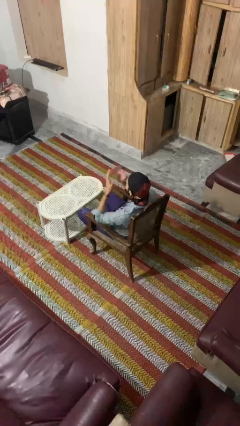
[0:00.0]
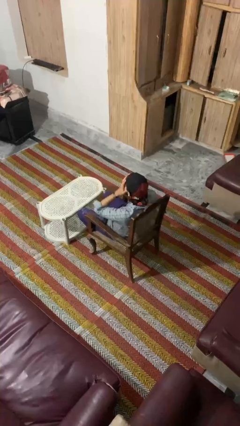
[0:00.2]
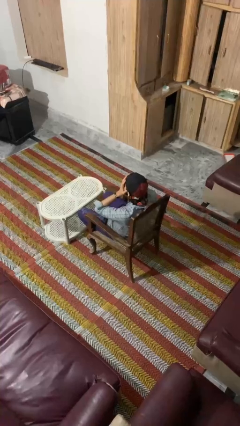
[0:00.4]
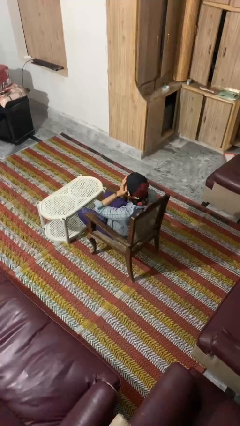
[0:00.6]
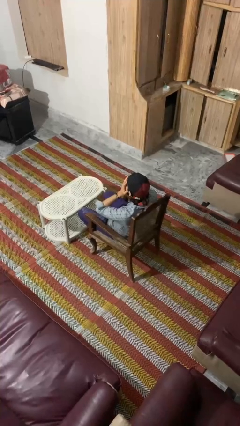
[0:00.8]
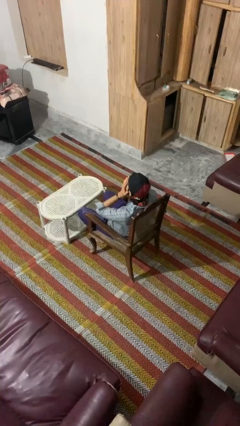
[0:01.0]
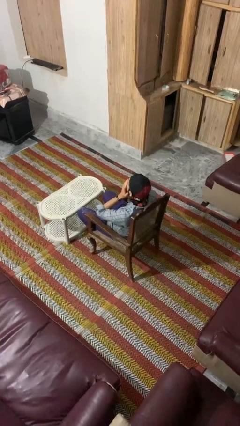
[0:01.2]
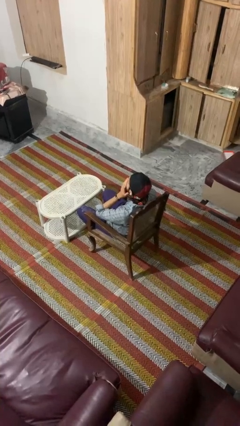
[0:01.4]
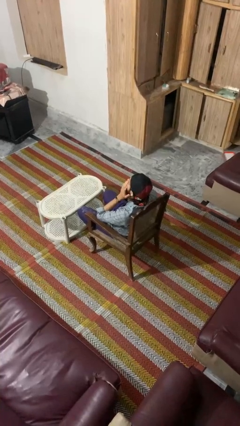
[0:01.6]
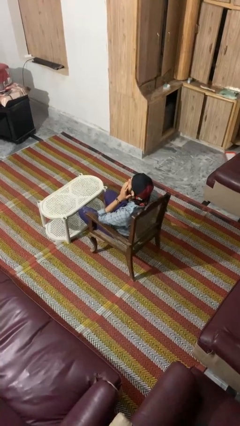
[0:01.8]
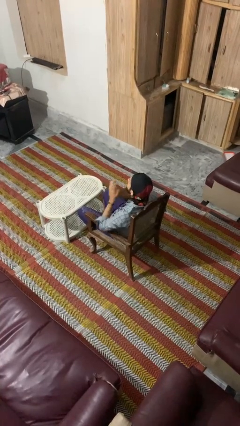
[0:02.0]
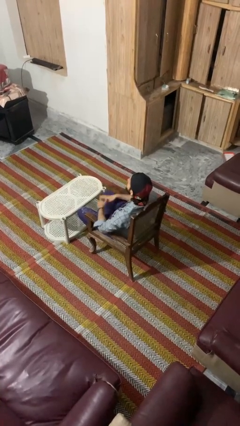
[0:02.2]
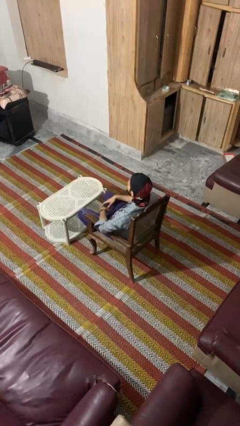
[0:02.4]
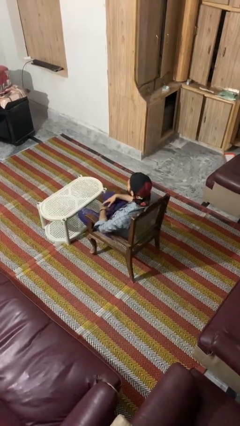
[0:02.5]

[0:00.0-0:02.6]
person covers face with hands

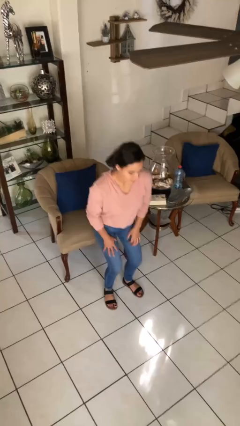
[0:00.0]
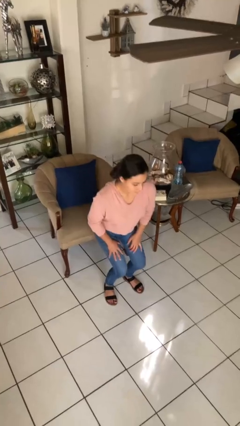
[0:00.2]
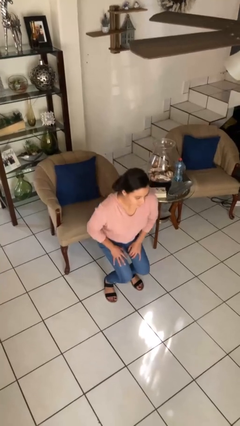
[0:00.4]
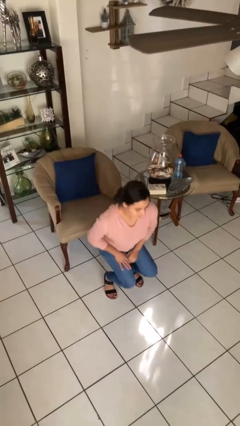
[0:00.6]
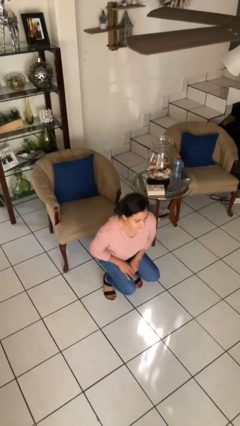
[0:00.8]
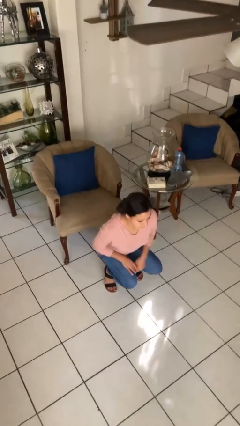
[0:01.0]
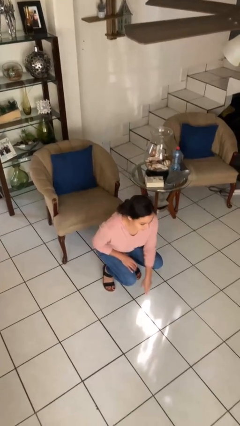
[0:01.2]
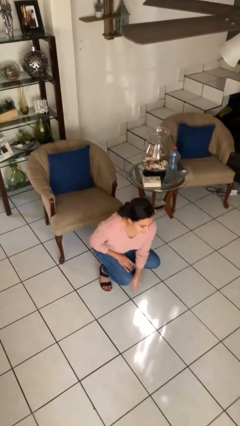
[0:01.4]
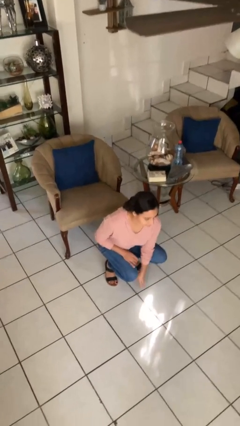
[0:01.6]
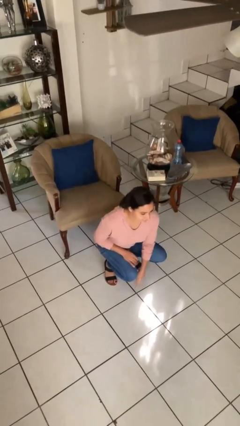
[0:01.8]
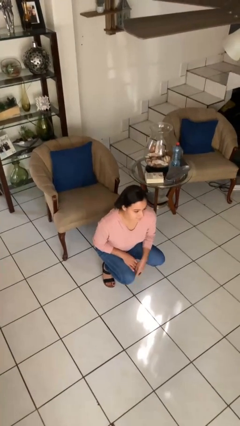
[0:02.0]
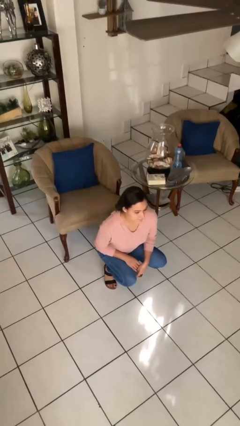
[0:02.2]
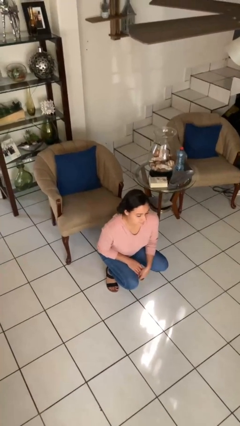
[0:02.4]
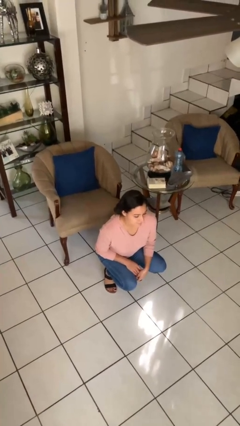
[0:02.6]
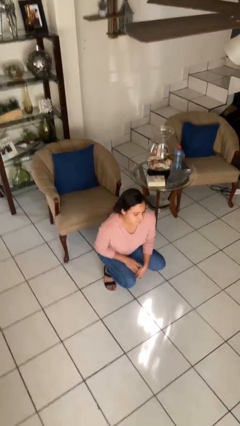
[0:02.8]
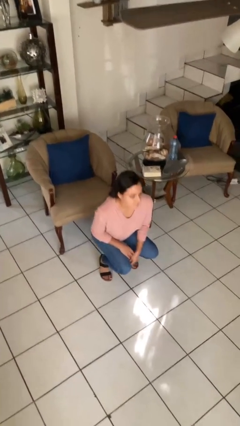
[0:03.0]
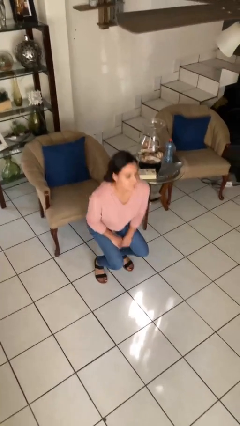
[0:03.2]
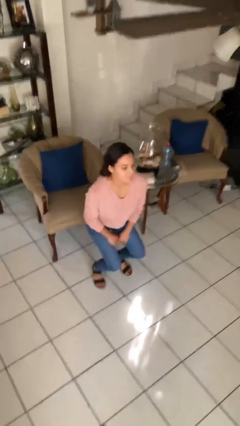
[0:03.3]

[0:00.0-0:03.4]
person squats

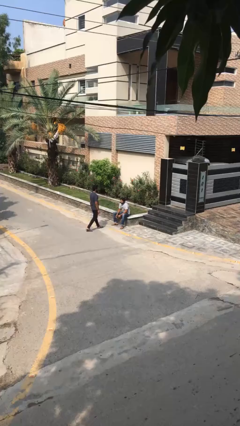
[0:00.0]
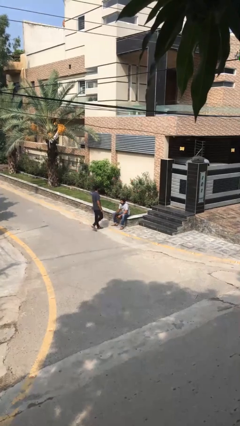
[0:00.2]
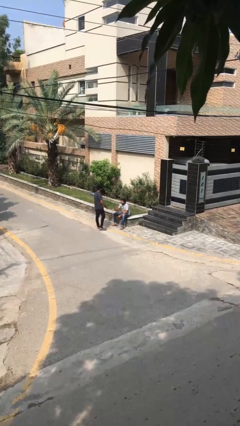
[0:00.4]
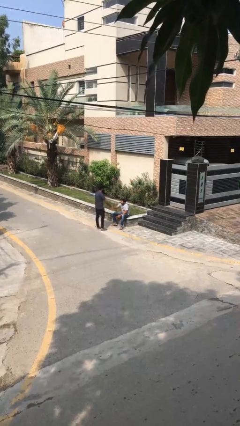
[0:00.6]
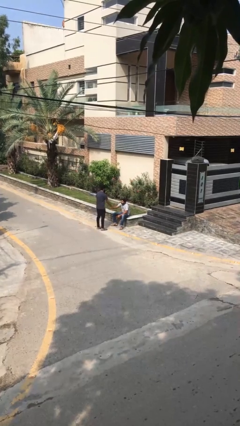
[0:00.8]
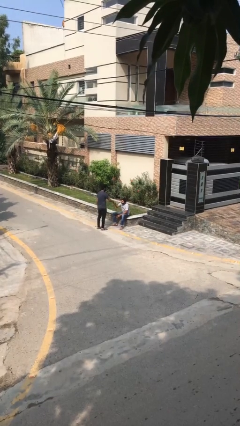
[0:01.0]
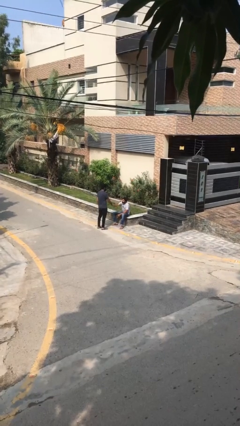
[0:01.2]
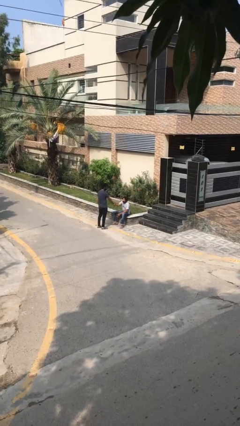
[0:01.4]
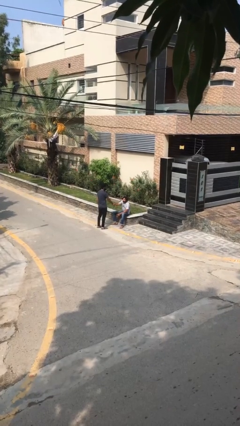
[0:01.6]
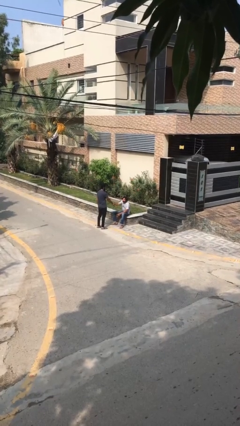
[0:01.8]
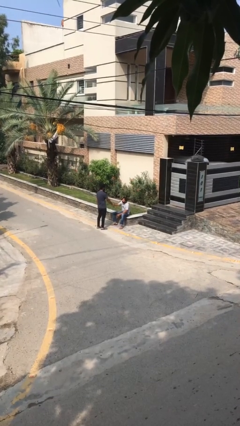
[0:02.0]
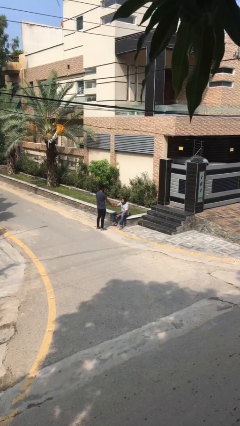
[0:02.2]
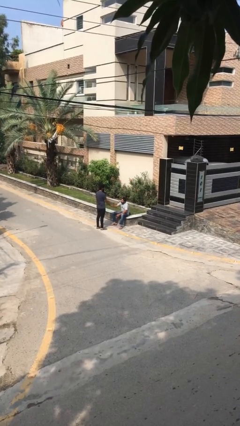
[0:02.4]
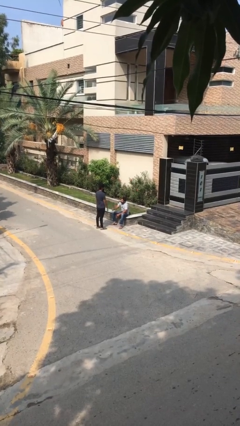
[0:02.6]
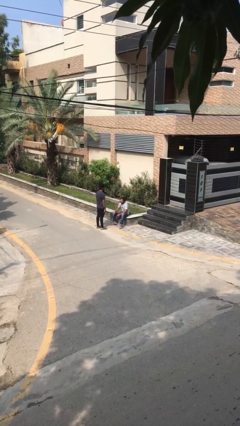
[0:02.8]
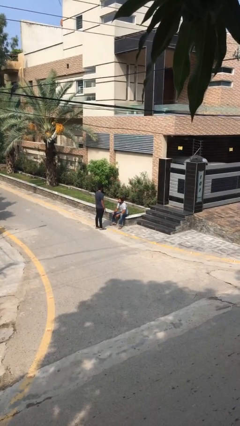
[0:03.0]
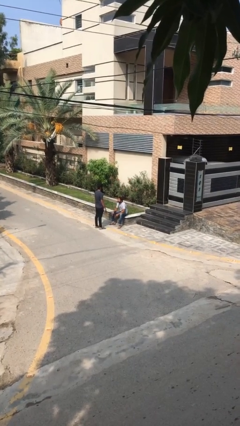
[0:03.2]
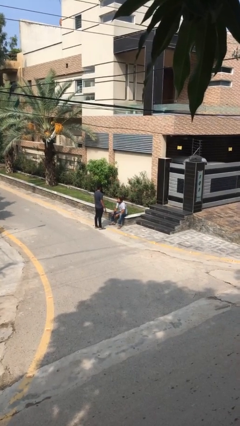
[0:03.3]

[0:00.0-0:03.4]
person shakes hand

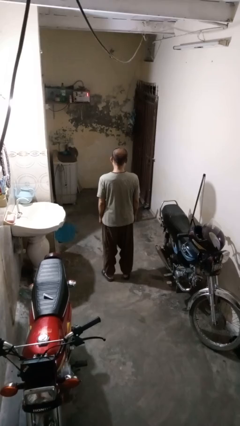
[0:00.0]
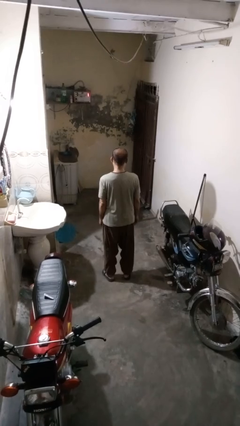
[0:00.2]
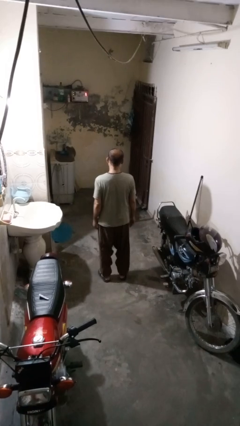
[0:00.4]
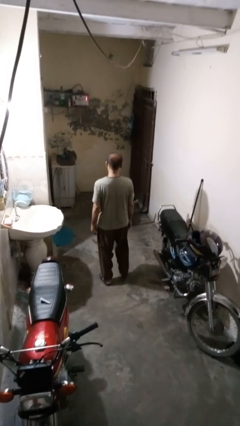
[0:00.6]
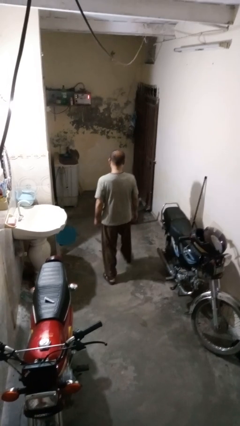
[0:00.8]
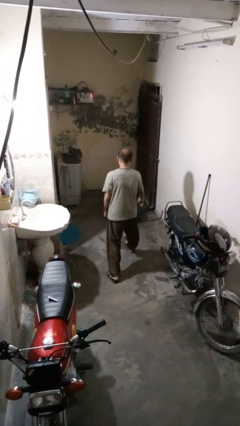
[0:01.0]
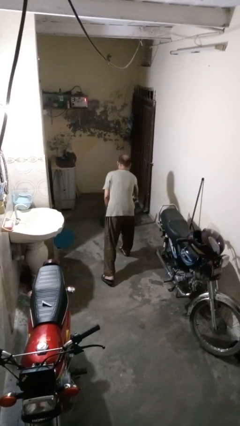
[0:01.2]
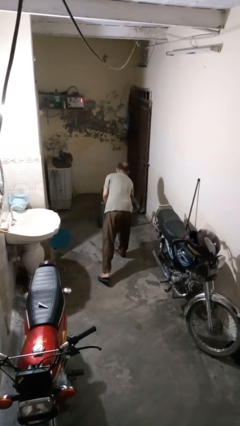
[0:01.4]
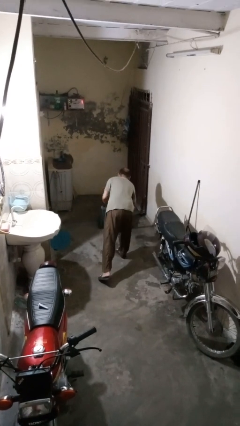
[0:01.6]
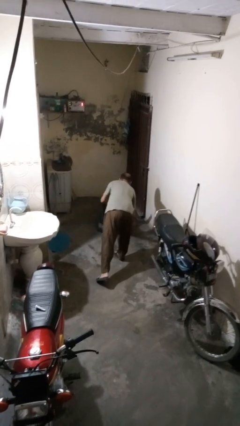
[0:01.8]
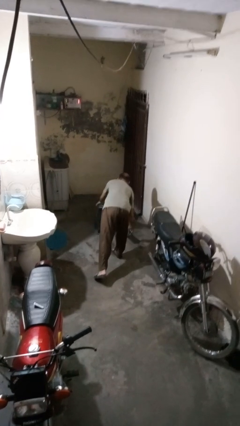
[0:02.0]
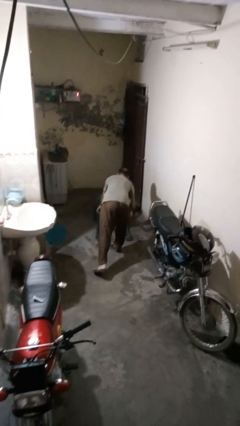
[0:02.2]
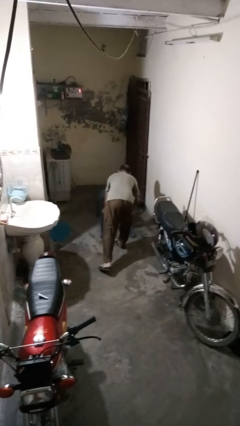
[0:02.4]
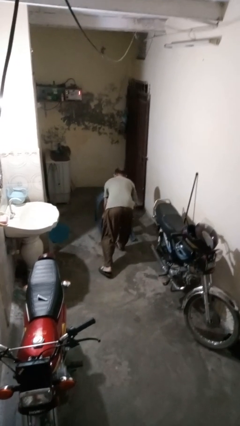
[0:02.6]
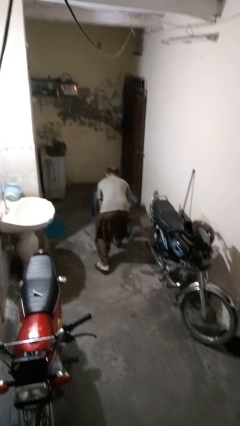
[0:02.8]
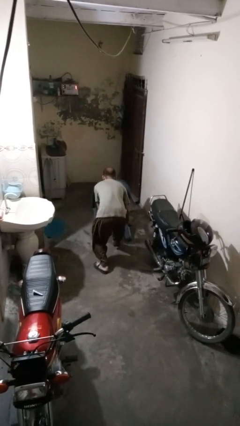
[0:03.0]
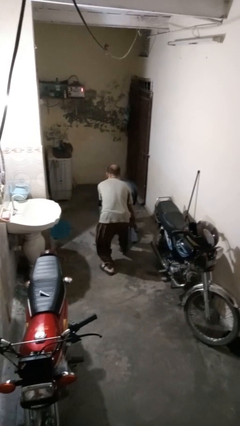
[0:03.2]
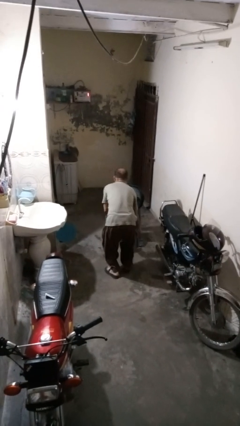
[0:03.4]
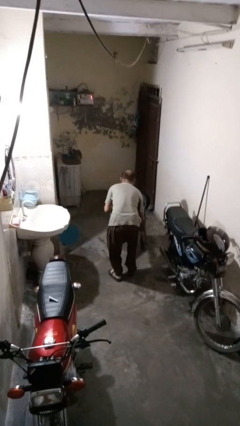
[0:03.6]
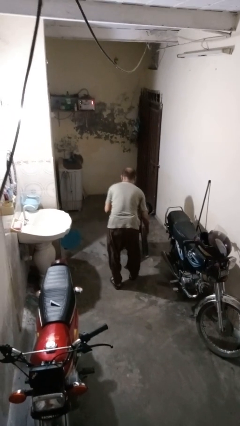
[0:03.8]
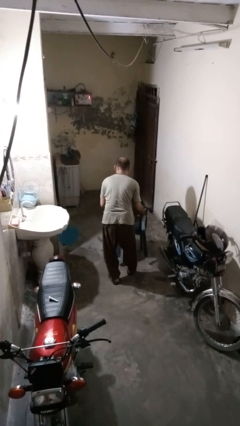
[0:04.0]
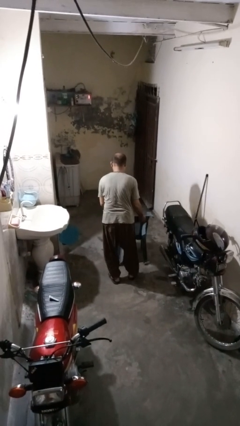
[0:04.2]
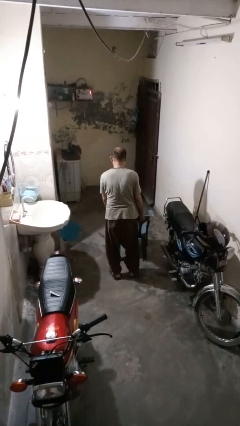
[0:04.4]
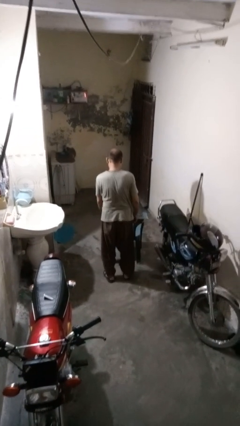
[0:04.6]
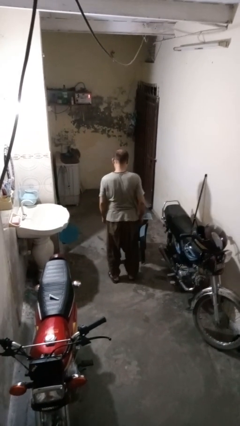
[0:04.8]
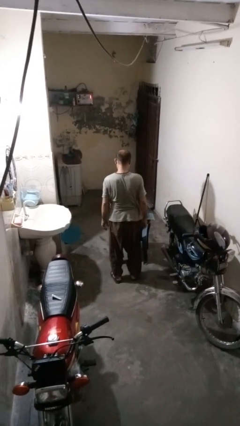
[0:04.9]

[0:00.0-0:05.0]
person sets upright furniture

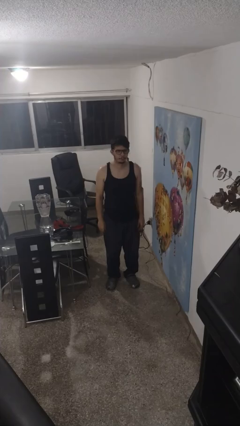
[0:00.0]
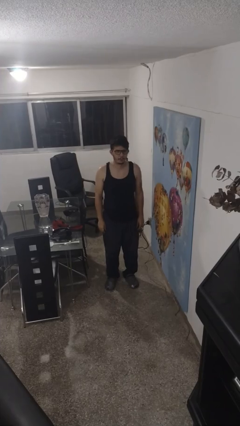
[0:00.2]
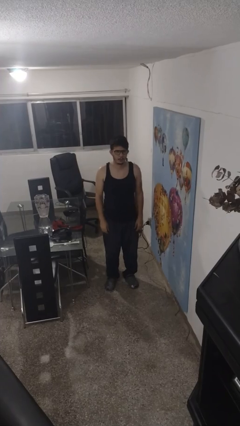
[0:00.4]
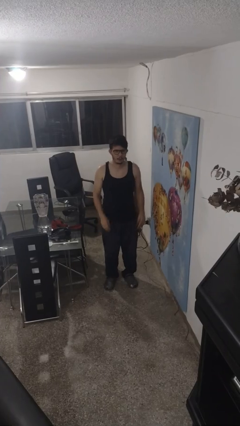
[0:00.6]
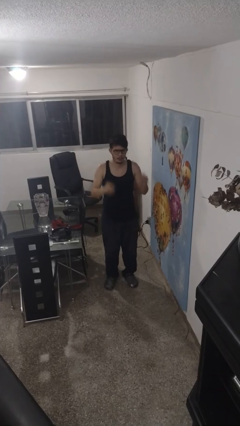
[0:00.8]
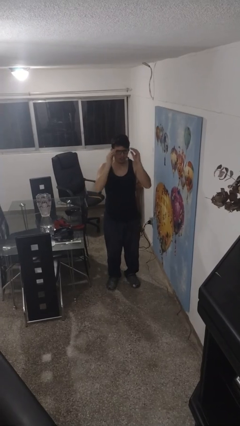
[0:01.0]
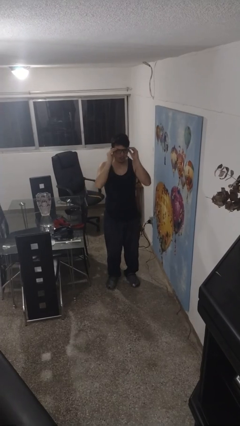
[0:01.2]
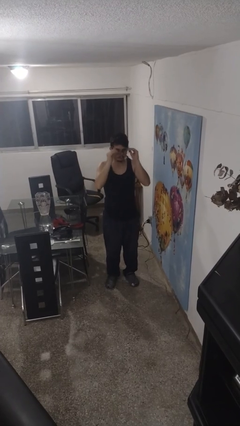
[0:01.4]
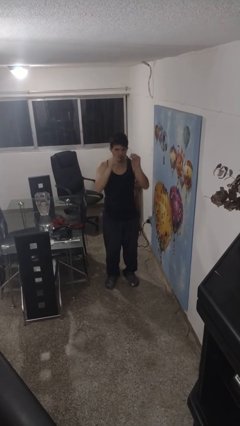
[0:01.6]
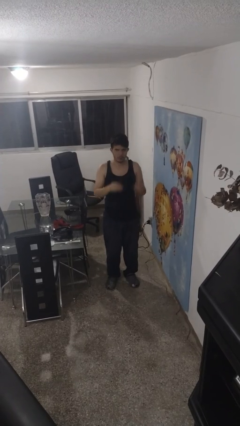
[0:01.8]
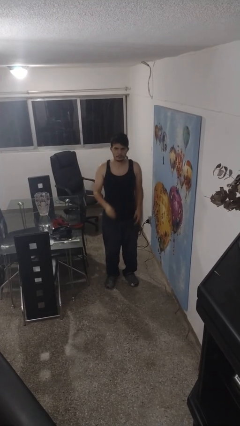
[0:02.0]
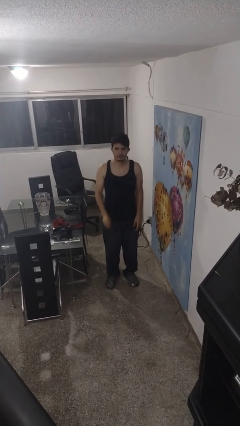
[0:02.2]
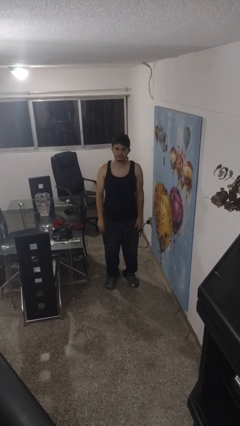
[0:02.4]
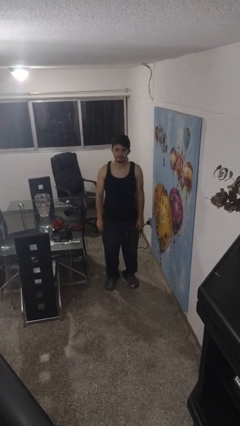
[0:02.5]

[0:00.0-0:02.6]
person takes off glasses

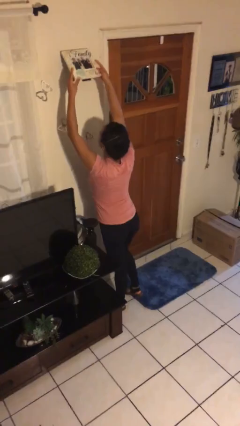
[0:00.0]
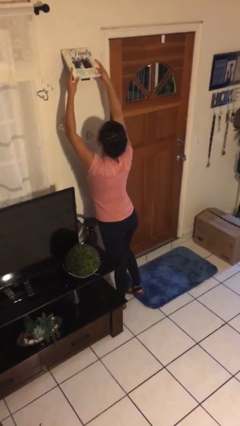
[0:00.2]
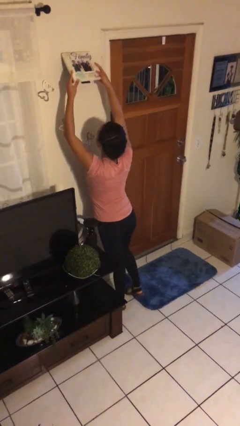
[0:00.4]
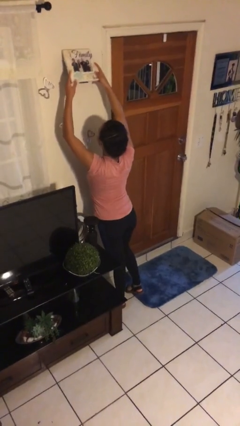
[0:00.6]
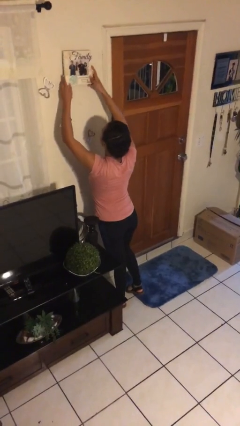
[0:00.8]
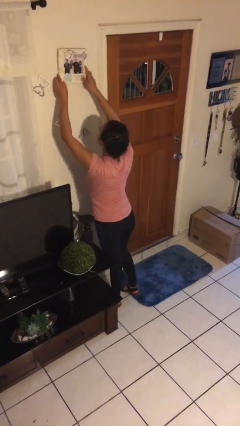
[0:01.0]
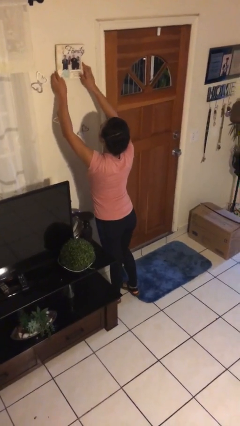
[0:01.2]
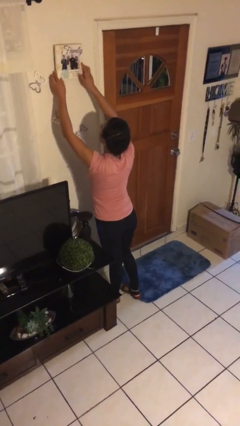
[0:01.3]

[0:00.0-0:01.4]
person puts up picture frame
